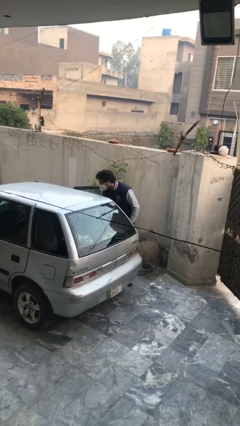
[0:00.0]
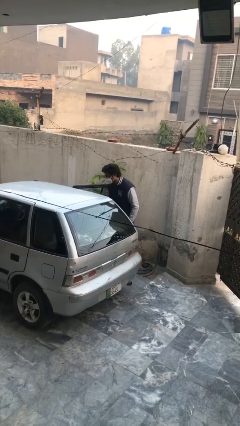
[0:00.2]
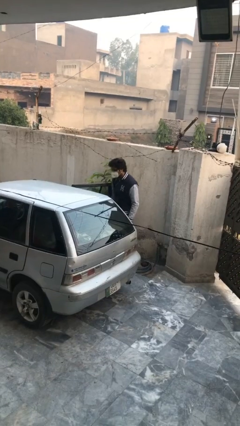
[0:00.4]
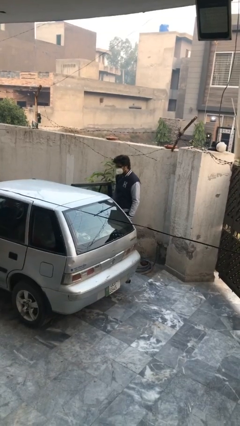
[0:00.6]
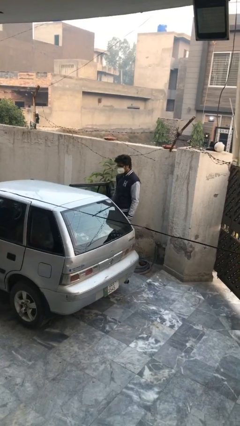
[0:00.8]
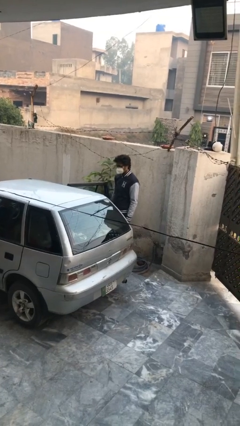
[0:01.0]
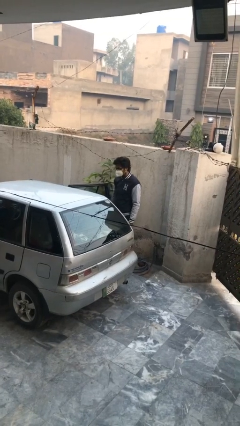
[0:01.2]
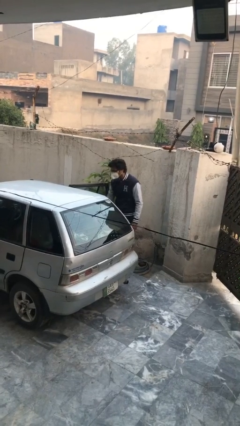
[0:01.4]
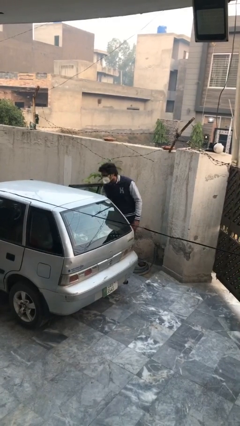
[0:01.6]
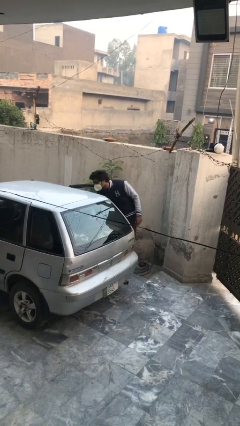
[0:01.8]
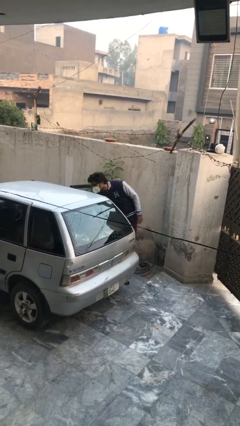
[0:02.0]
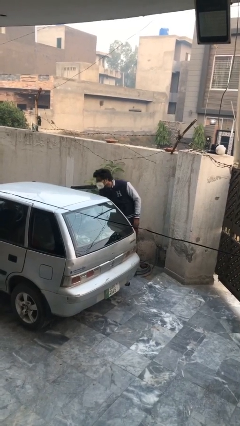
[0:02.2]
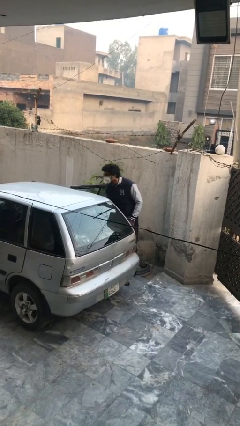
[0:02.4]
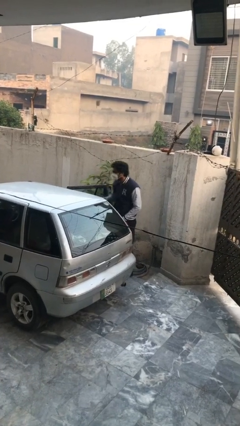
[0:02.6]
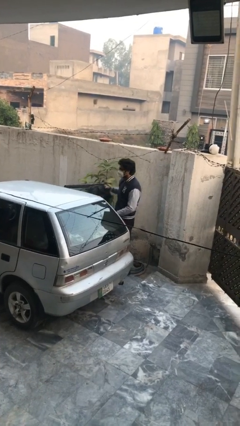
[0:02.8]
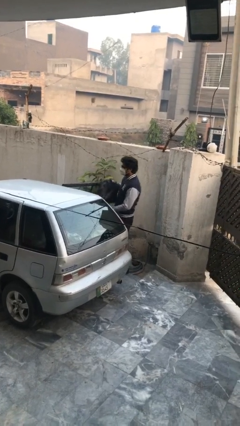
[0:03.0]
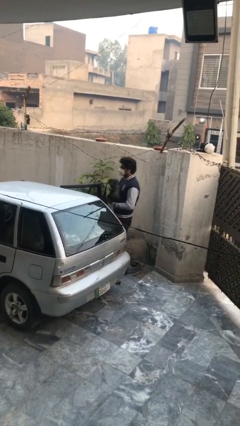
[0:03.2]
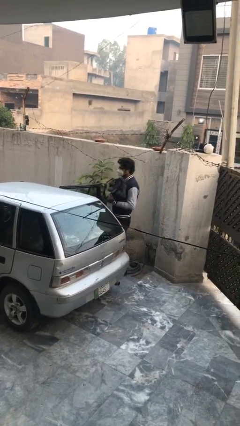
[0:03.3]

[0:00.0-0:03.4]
person unloads car

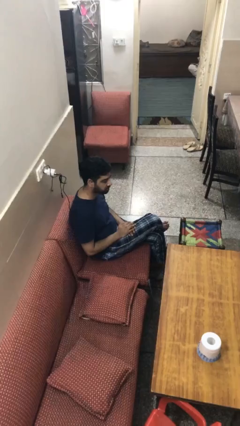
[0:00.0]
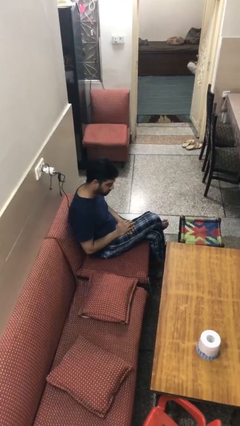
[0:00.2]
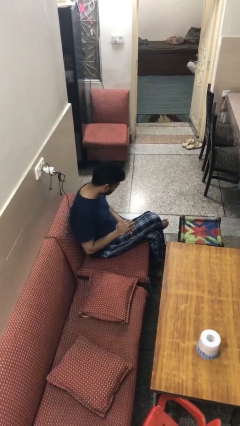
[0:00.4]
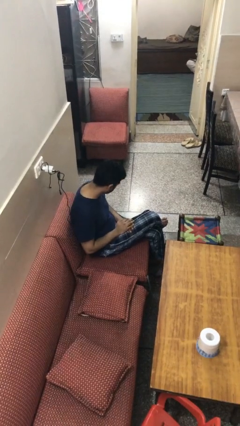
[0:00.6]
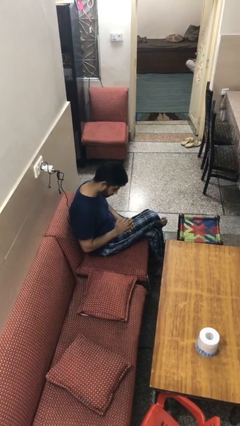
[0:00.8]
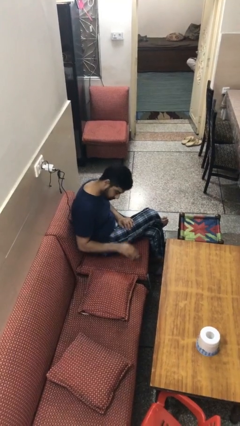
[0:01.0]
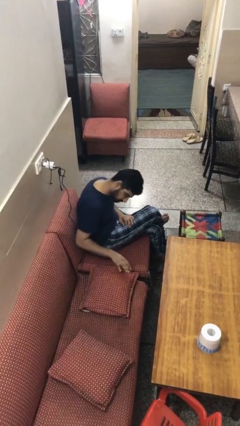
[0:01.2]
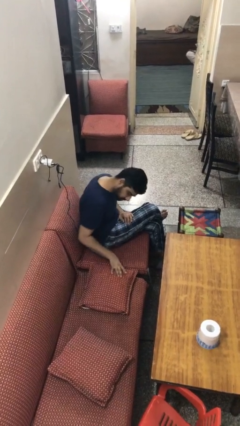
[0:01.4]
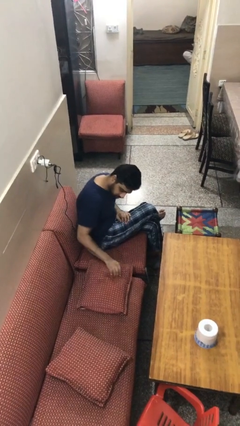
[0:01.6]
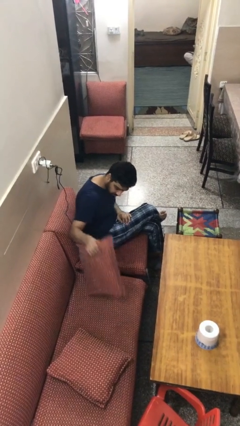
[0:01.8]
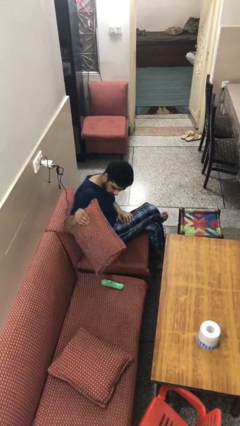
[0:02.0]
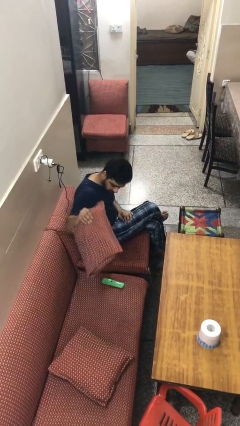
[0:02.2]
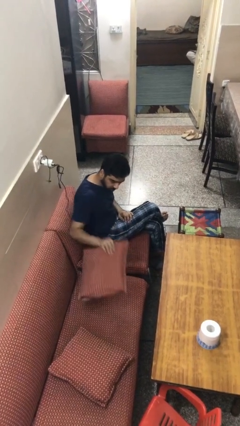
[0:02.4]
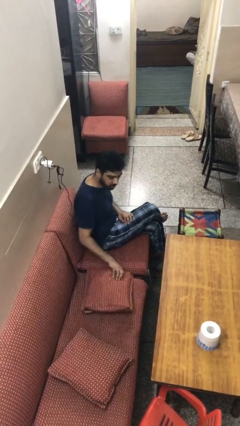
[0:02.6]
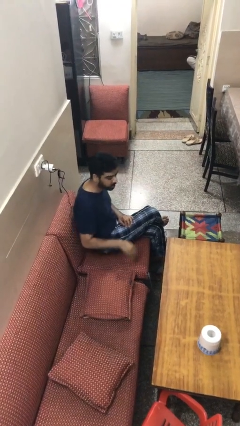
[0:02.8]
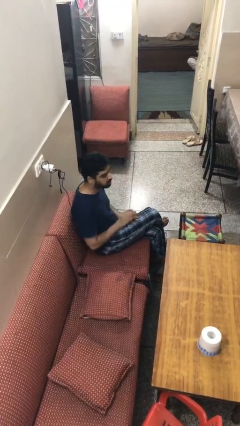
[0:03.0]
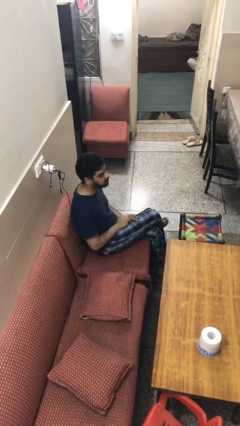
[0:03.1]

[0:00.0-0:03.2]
person searches in couch

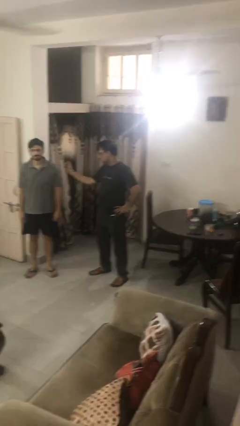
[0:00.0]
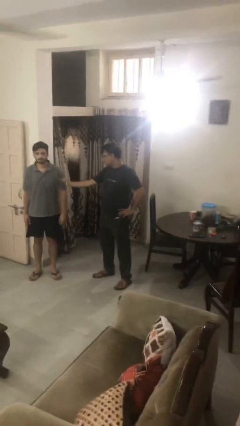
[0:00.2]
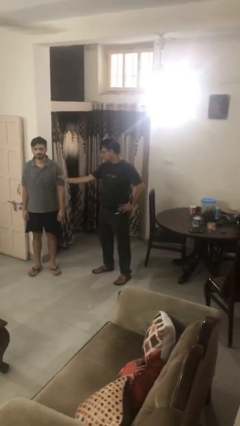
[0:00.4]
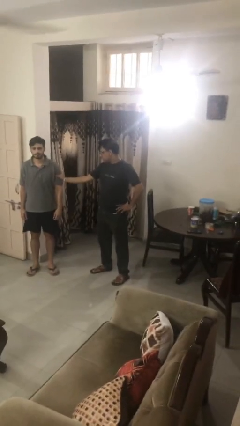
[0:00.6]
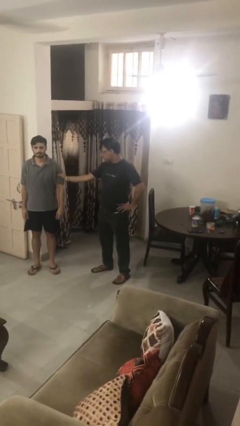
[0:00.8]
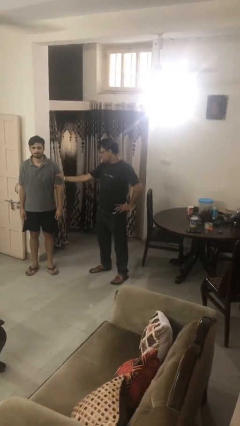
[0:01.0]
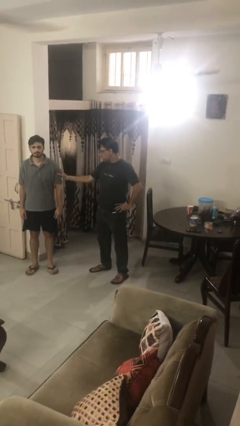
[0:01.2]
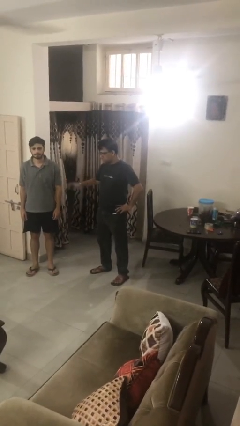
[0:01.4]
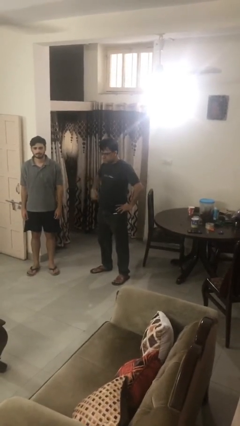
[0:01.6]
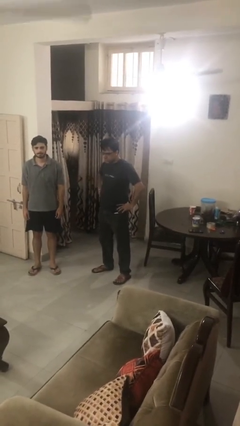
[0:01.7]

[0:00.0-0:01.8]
person grabs person by bicep

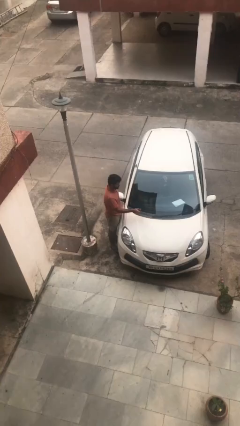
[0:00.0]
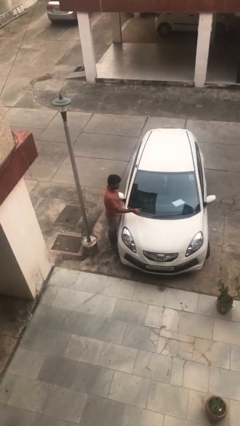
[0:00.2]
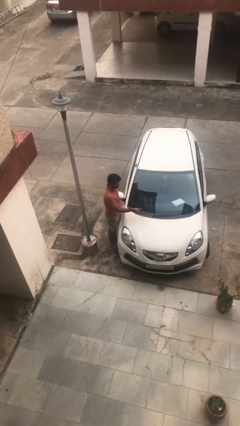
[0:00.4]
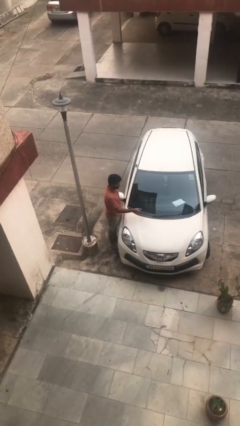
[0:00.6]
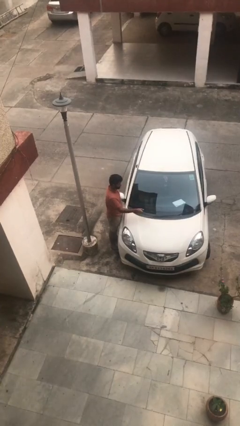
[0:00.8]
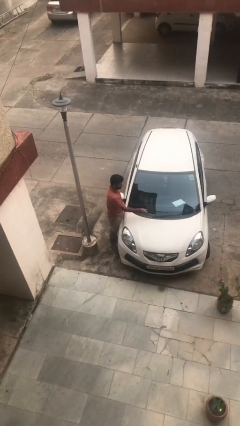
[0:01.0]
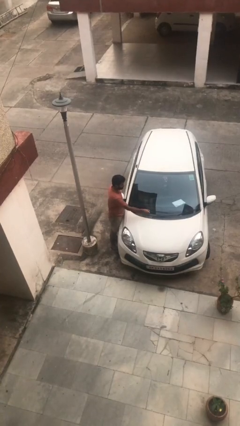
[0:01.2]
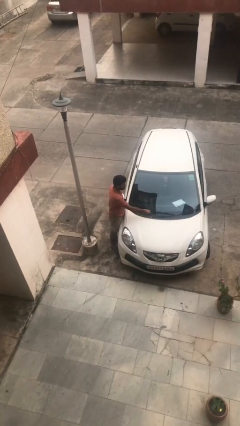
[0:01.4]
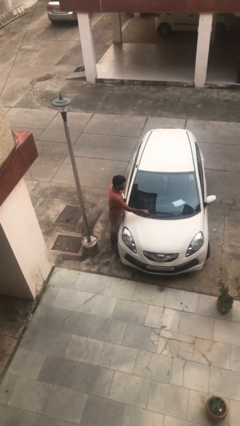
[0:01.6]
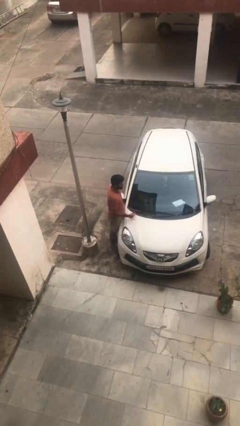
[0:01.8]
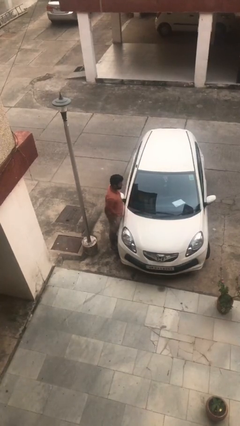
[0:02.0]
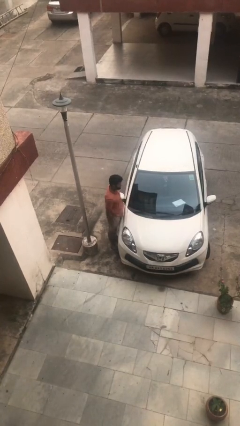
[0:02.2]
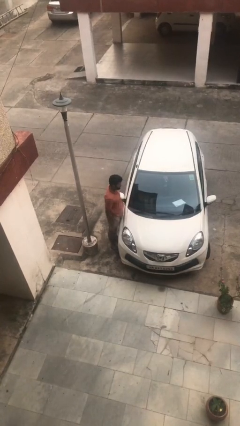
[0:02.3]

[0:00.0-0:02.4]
person flips down car wipers

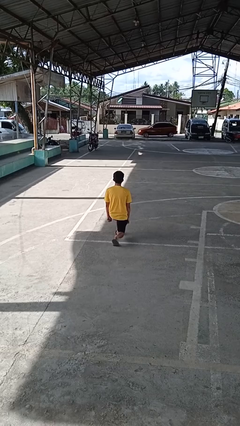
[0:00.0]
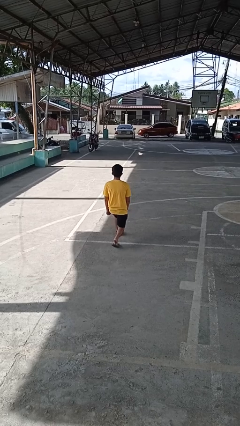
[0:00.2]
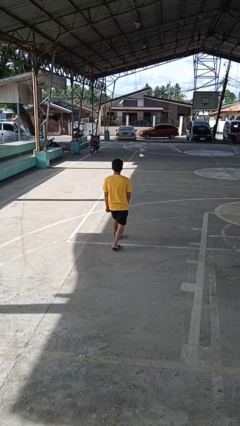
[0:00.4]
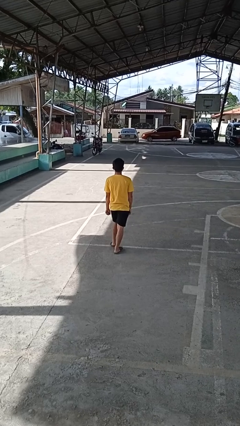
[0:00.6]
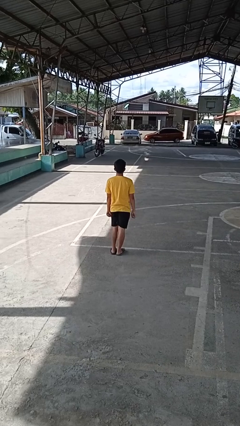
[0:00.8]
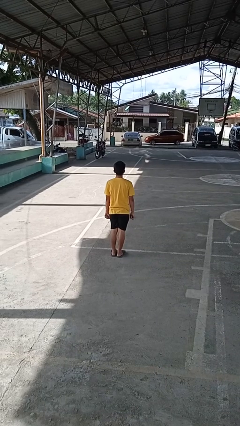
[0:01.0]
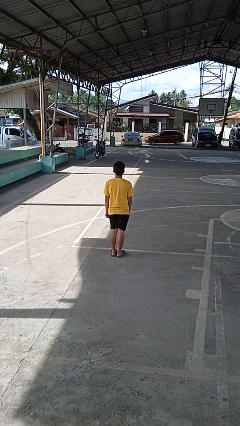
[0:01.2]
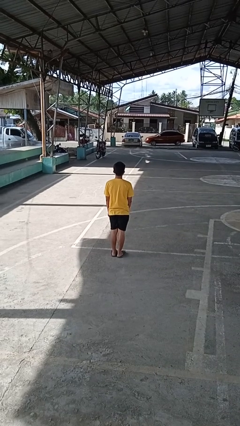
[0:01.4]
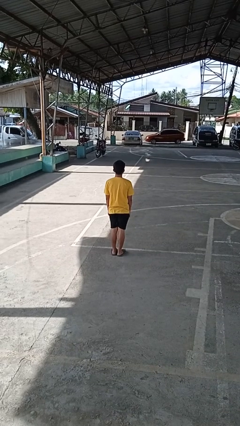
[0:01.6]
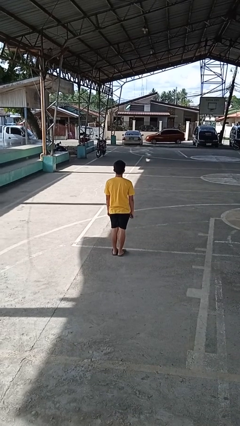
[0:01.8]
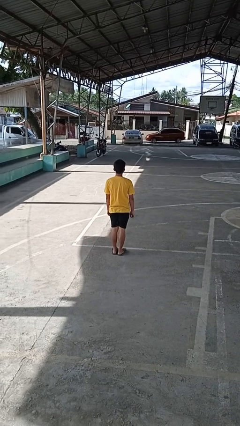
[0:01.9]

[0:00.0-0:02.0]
person stands up from floor

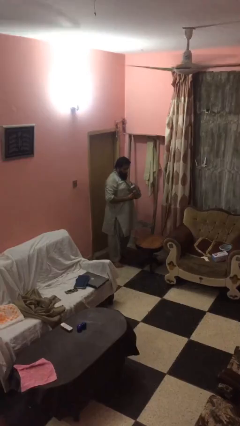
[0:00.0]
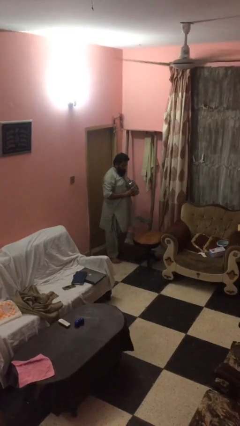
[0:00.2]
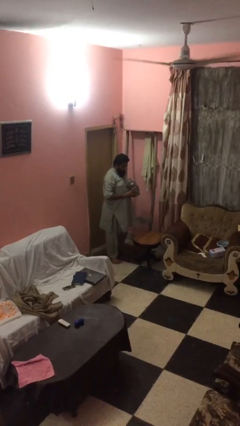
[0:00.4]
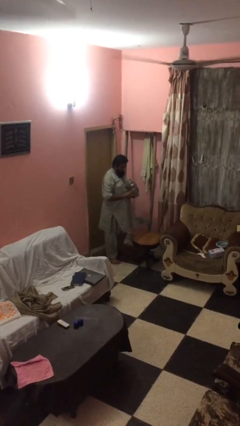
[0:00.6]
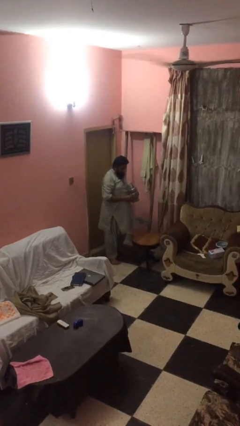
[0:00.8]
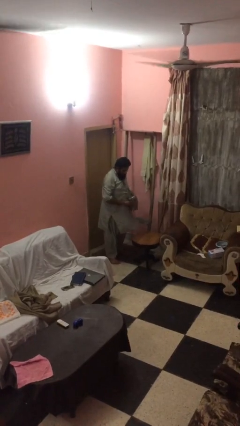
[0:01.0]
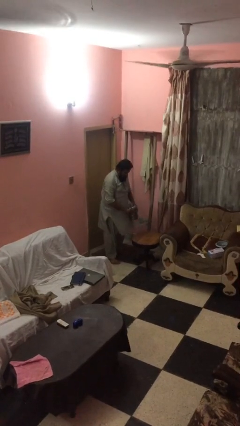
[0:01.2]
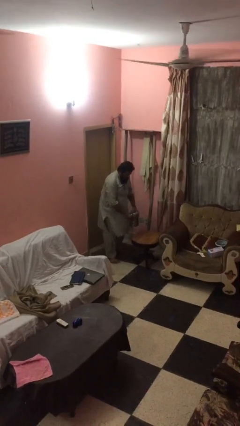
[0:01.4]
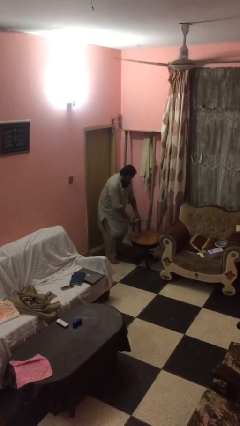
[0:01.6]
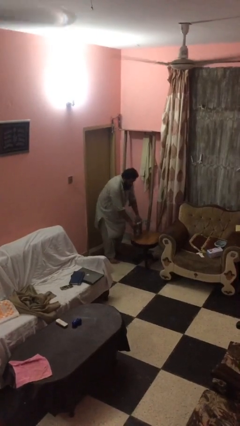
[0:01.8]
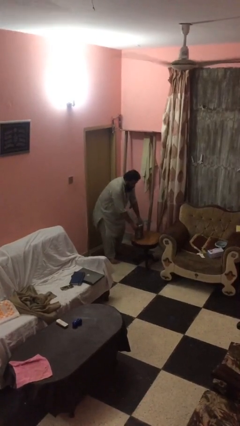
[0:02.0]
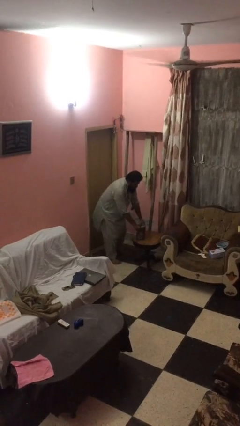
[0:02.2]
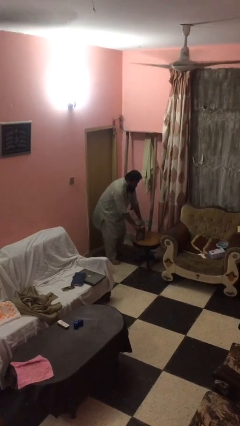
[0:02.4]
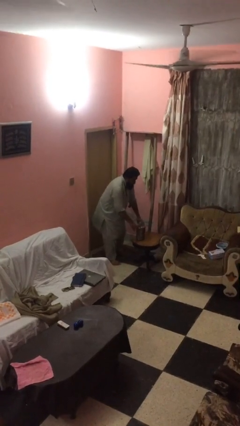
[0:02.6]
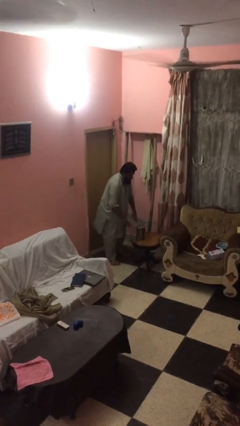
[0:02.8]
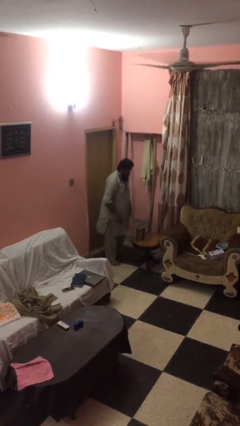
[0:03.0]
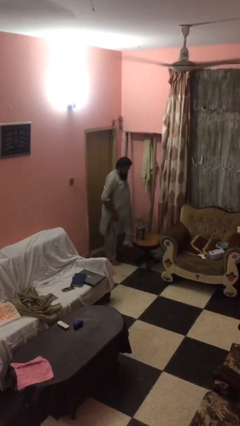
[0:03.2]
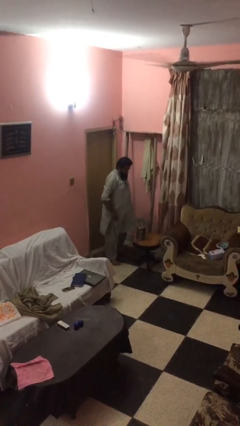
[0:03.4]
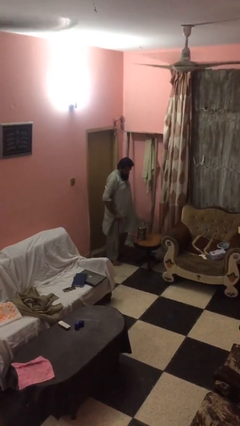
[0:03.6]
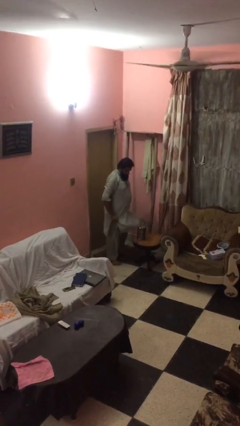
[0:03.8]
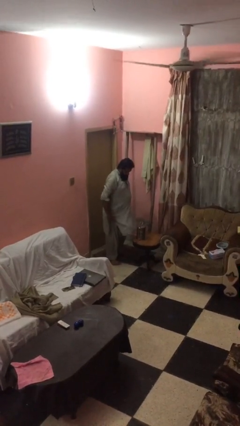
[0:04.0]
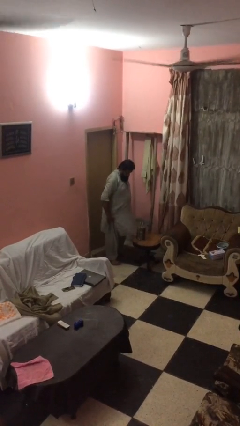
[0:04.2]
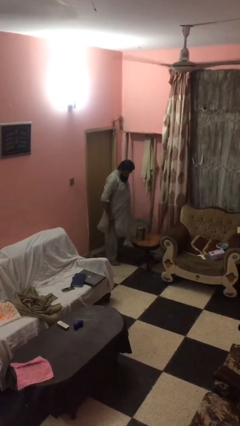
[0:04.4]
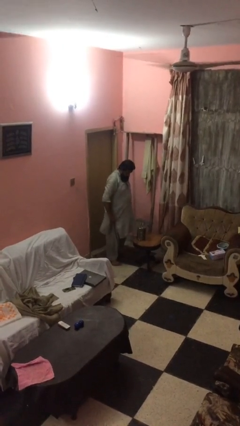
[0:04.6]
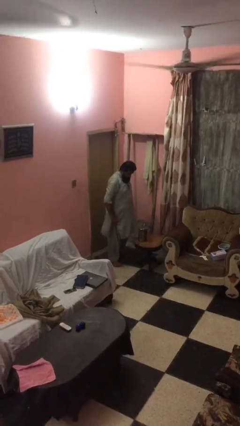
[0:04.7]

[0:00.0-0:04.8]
person puts down object on table
